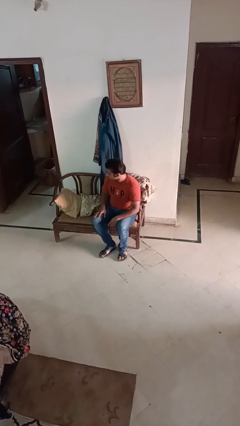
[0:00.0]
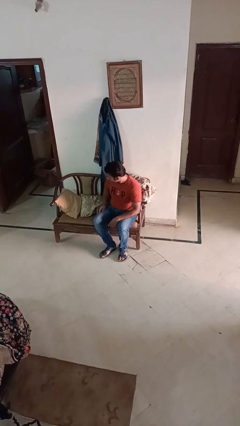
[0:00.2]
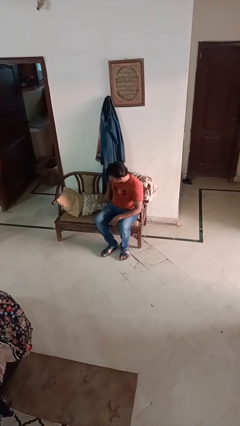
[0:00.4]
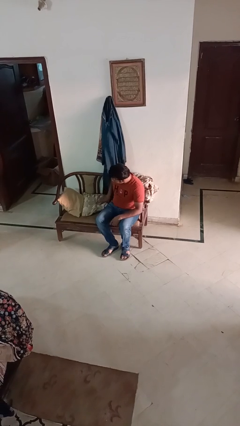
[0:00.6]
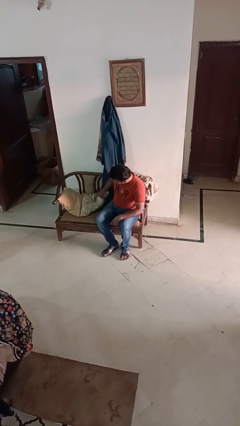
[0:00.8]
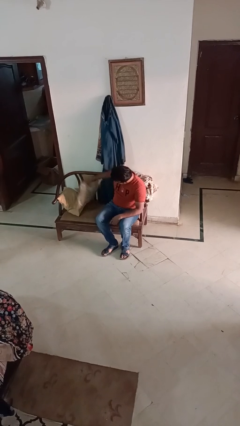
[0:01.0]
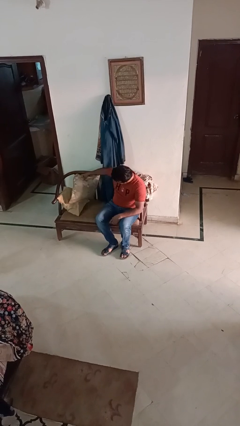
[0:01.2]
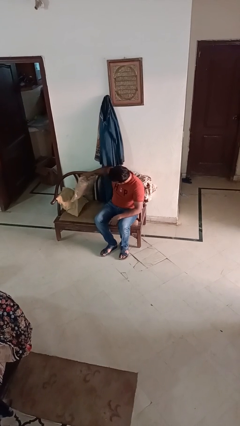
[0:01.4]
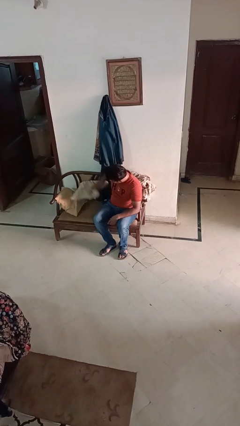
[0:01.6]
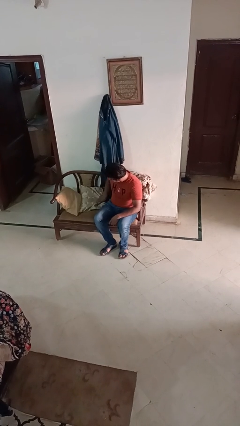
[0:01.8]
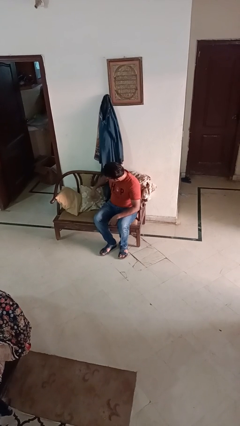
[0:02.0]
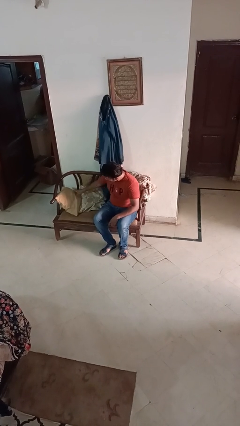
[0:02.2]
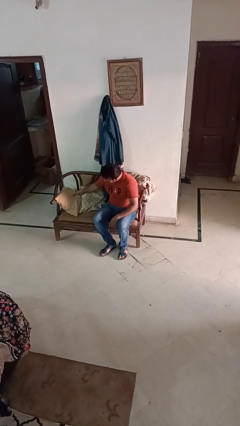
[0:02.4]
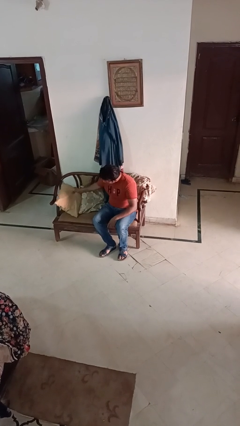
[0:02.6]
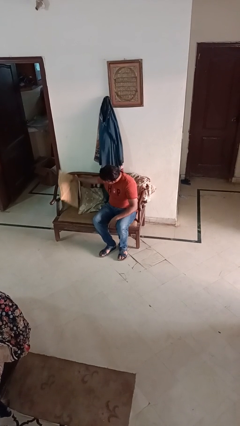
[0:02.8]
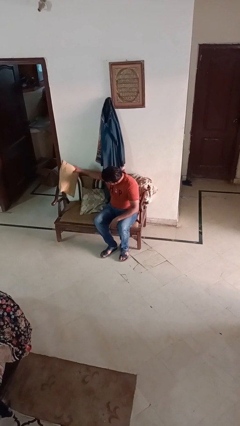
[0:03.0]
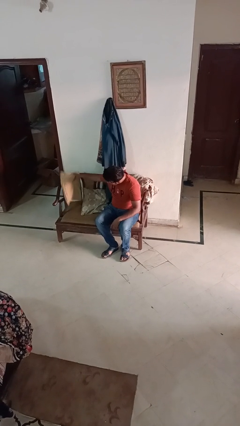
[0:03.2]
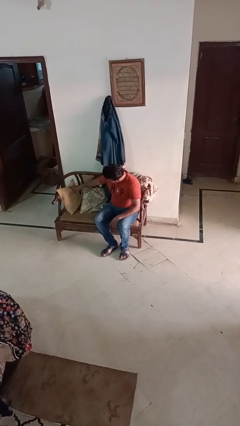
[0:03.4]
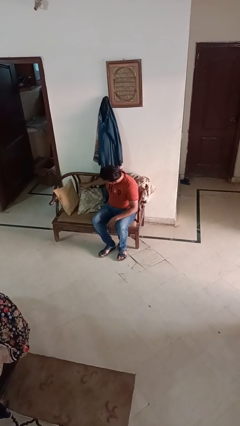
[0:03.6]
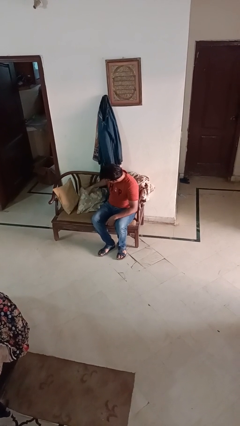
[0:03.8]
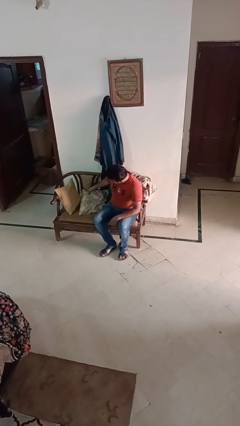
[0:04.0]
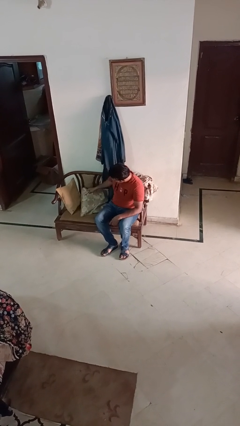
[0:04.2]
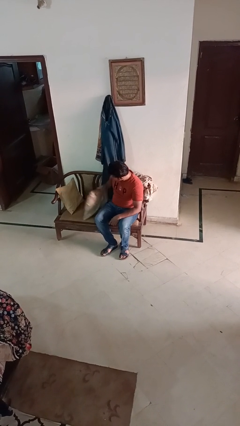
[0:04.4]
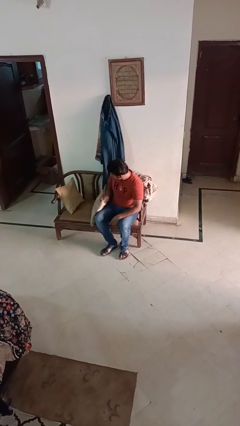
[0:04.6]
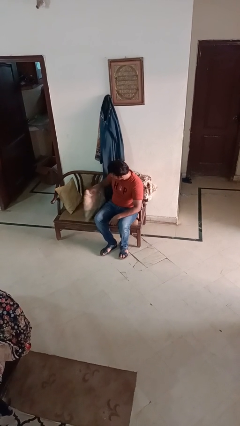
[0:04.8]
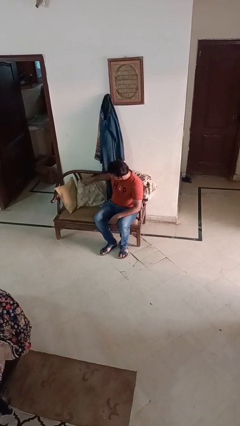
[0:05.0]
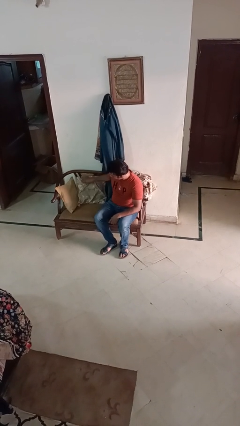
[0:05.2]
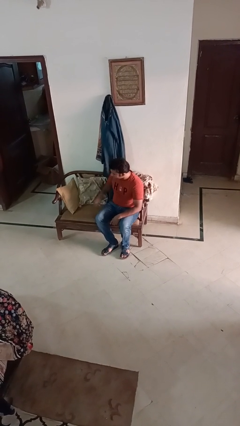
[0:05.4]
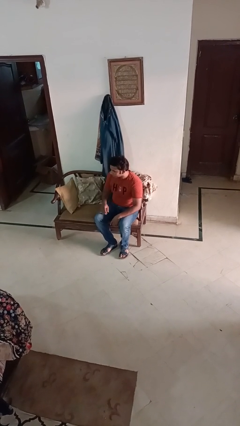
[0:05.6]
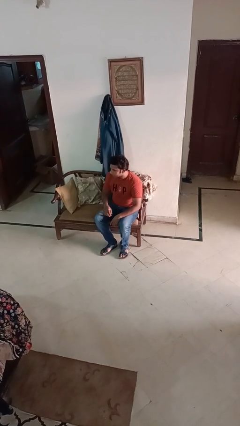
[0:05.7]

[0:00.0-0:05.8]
person searches in couch

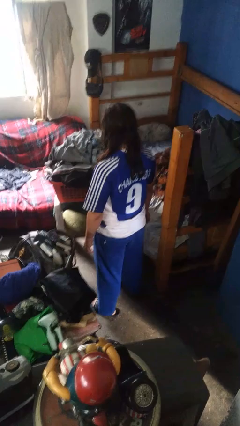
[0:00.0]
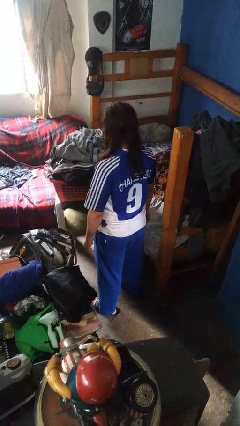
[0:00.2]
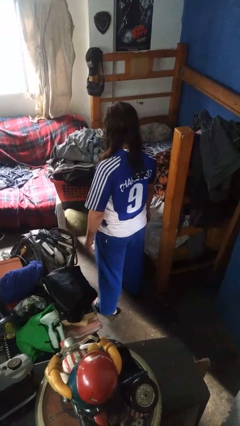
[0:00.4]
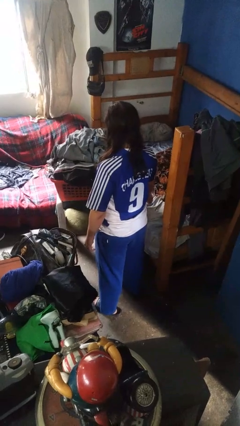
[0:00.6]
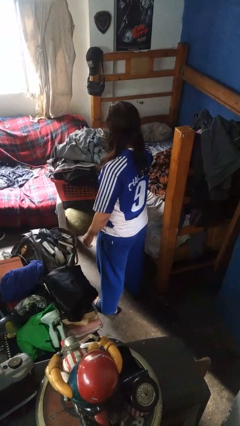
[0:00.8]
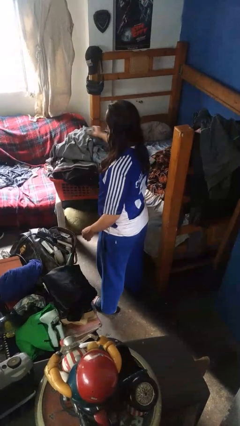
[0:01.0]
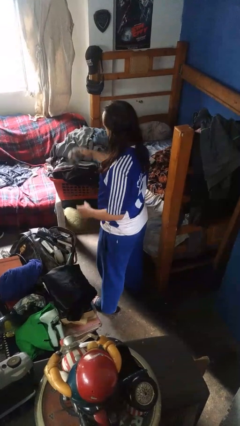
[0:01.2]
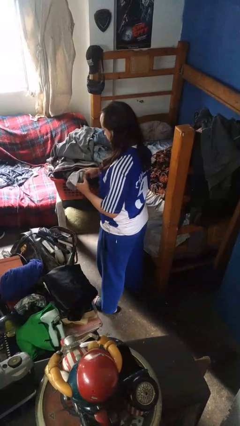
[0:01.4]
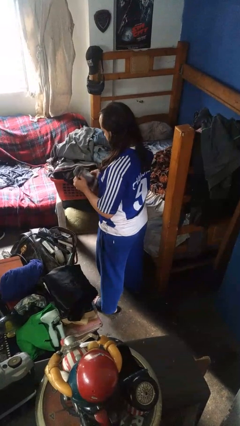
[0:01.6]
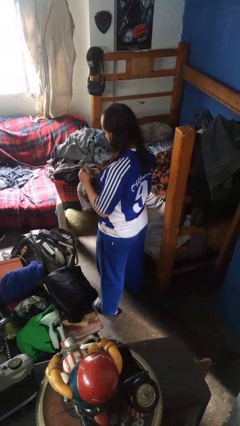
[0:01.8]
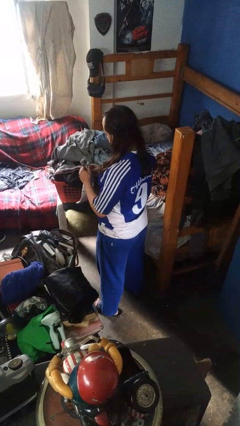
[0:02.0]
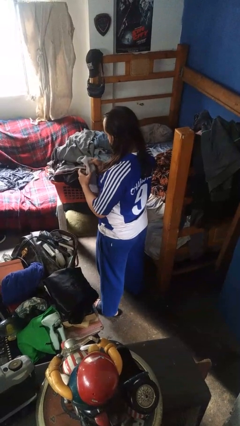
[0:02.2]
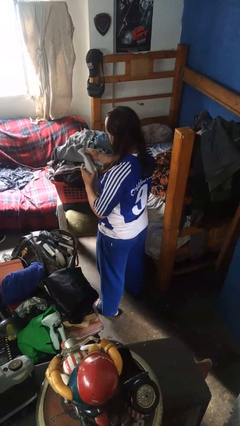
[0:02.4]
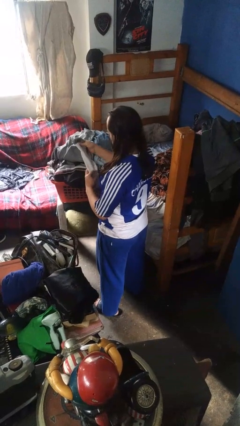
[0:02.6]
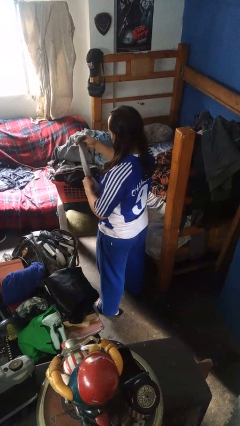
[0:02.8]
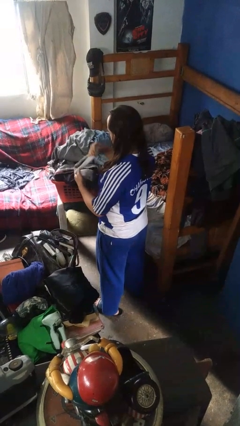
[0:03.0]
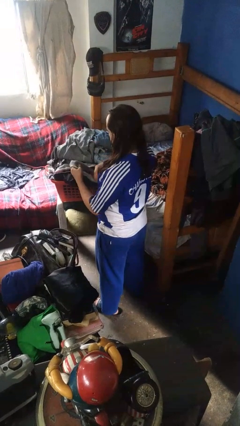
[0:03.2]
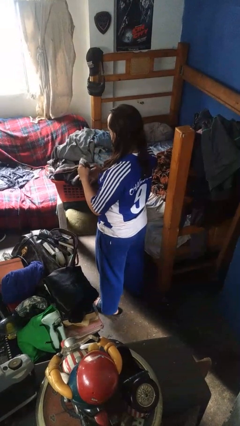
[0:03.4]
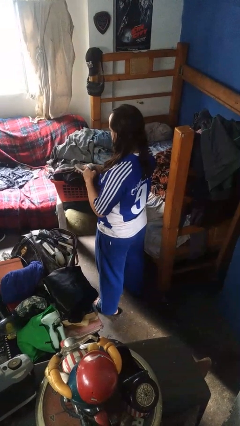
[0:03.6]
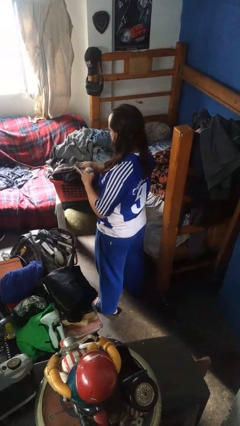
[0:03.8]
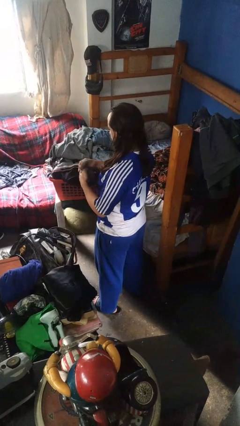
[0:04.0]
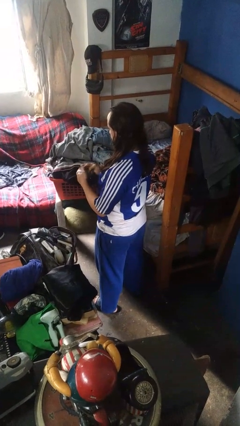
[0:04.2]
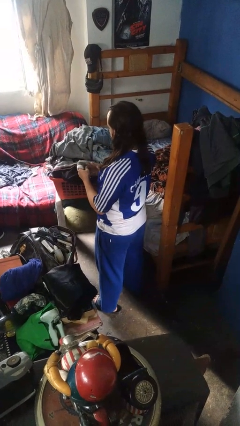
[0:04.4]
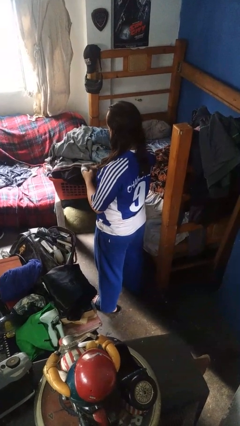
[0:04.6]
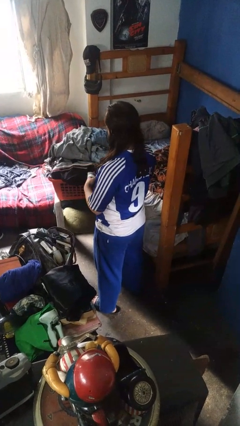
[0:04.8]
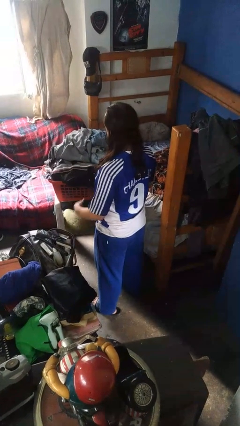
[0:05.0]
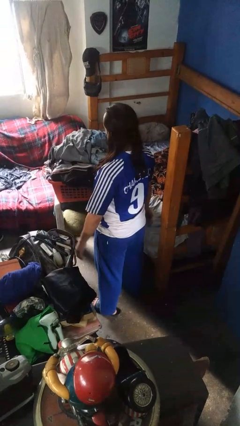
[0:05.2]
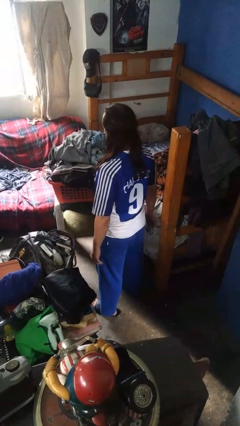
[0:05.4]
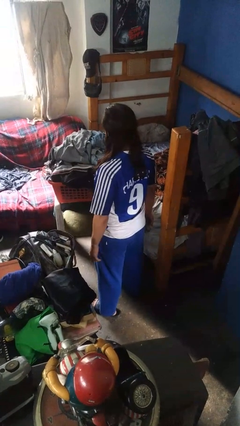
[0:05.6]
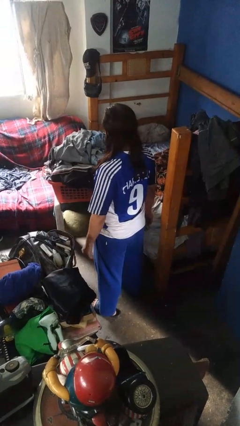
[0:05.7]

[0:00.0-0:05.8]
person folds socks

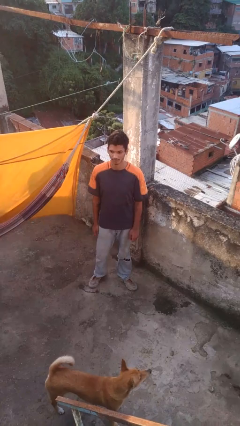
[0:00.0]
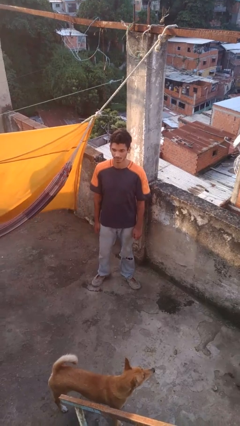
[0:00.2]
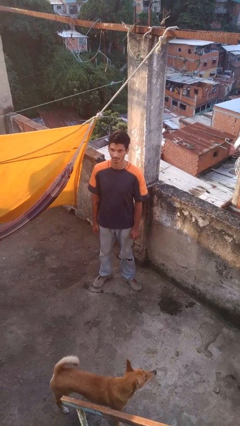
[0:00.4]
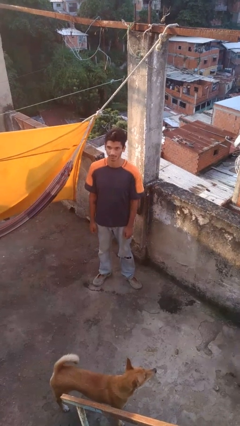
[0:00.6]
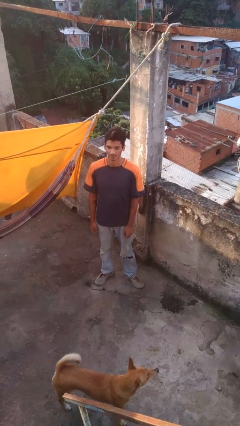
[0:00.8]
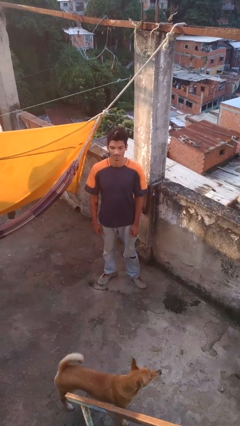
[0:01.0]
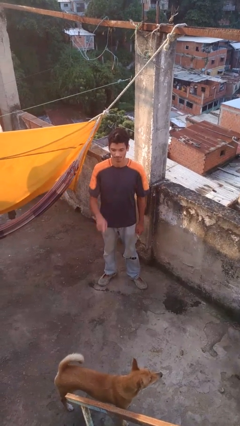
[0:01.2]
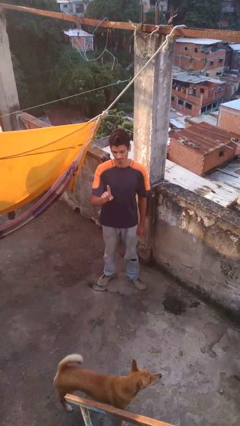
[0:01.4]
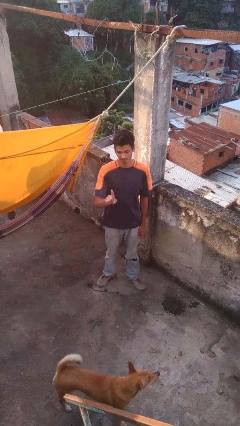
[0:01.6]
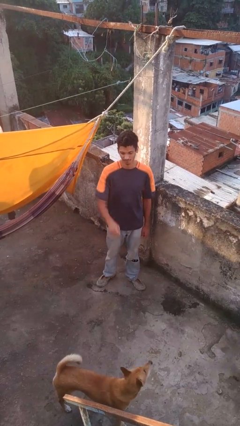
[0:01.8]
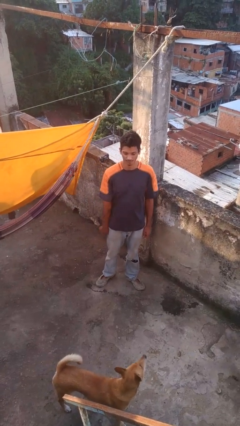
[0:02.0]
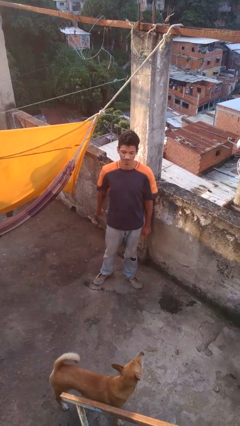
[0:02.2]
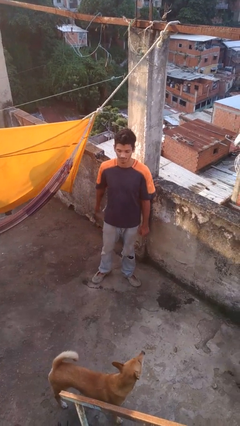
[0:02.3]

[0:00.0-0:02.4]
person gestures number one

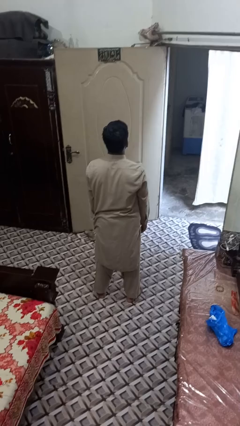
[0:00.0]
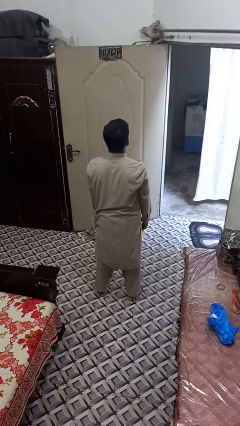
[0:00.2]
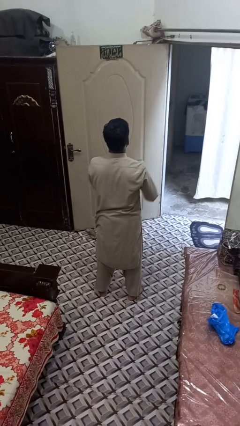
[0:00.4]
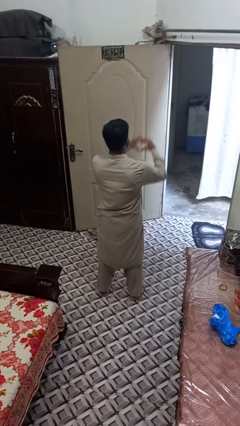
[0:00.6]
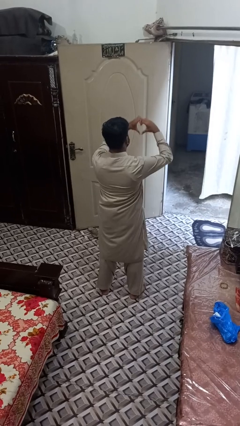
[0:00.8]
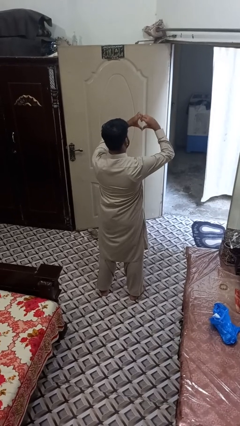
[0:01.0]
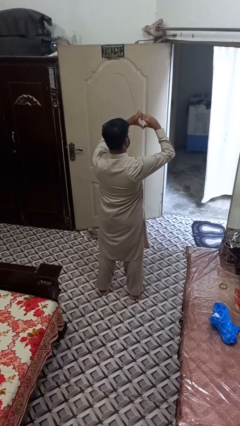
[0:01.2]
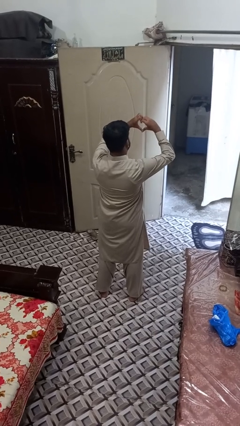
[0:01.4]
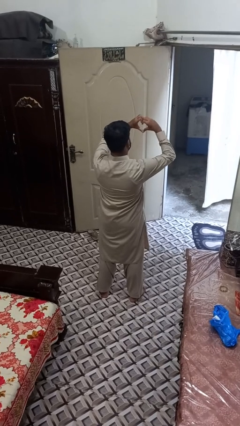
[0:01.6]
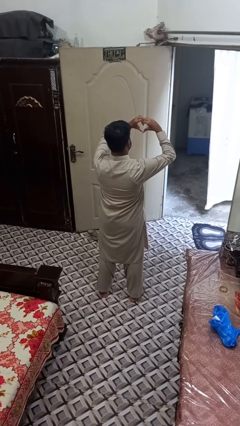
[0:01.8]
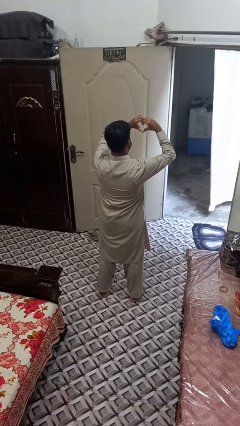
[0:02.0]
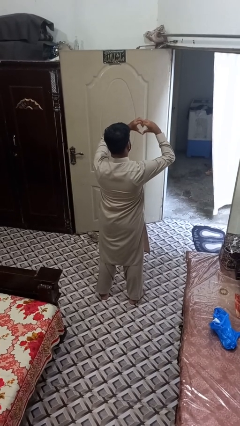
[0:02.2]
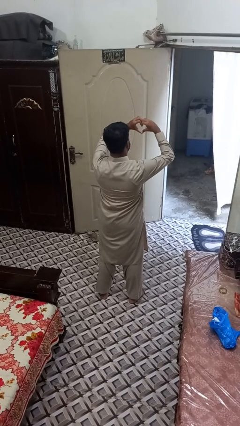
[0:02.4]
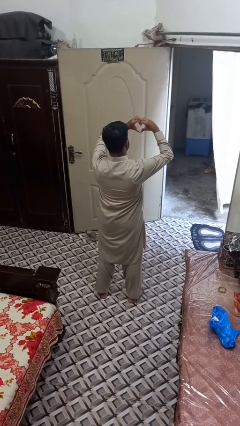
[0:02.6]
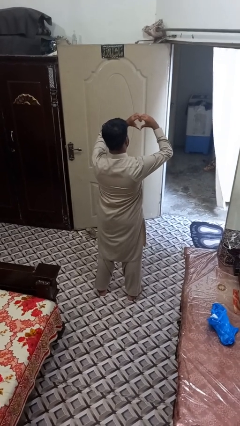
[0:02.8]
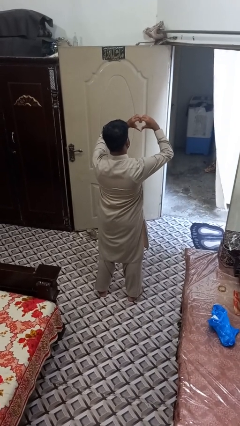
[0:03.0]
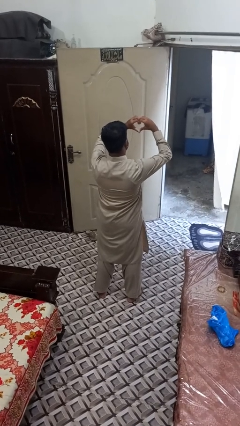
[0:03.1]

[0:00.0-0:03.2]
person gestures heart

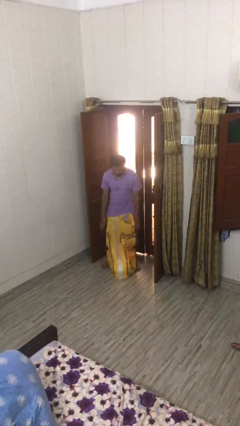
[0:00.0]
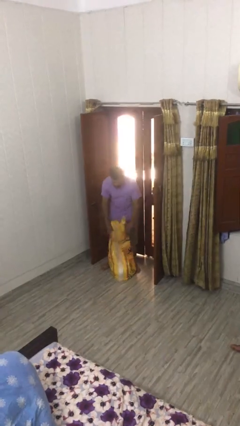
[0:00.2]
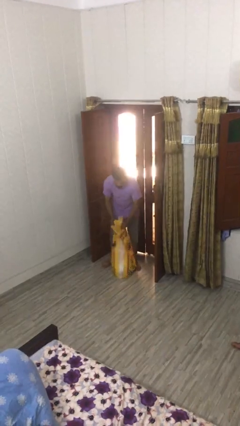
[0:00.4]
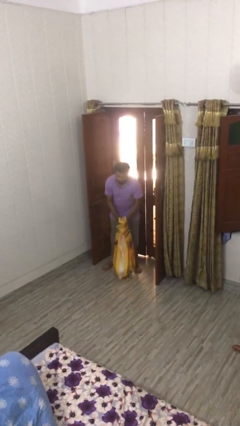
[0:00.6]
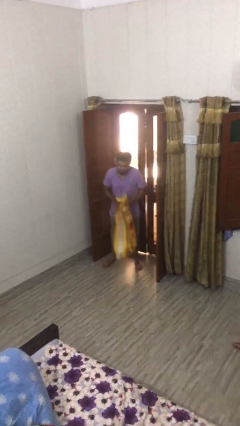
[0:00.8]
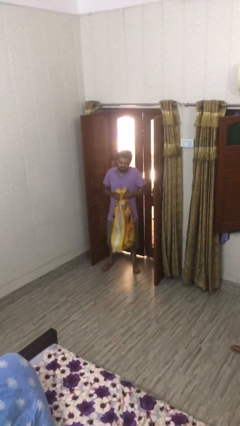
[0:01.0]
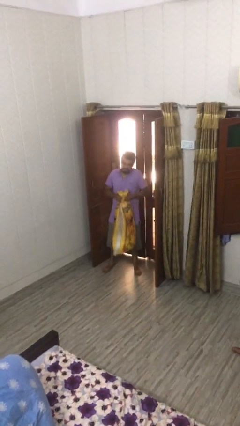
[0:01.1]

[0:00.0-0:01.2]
person picks up object from floor
